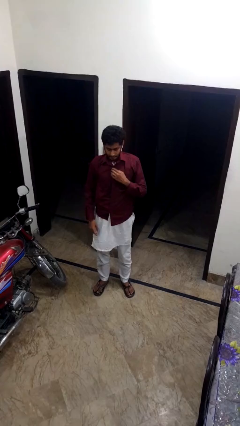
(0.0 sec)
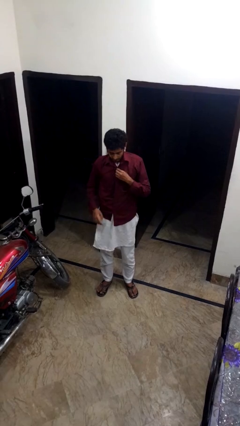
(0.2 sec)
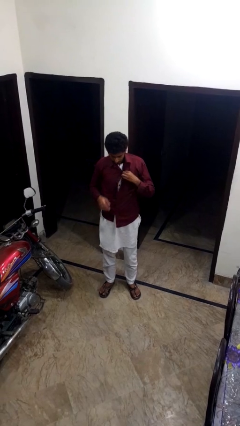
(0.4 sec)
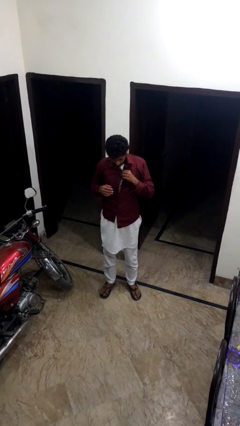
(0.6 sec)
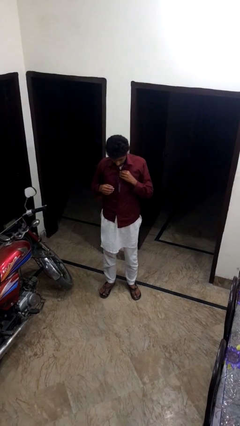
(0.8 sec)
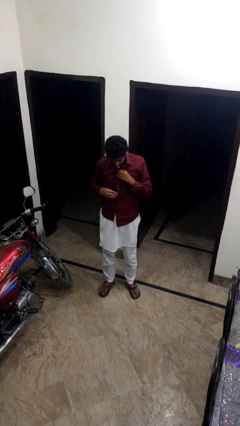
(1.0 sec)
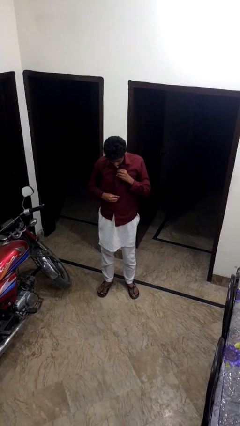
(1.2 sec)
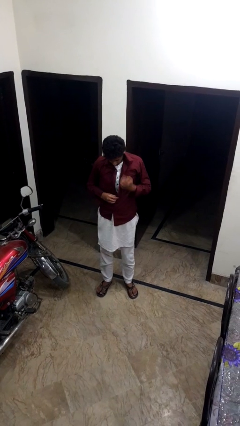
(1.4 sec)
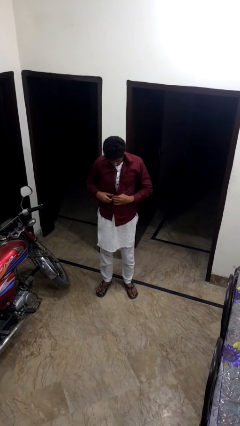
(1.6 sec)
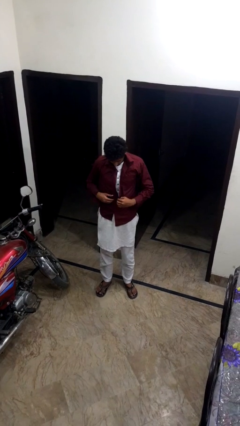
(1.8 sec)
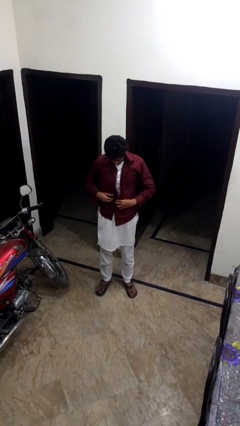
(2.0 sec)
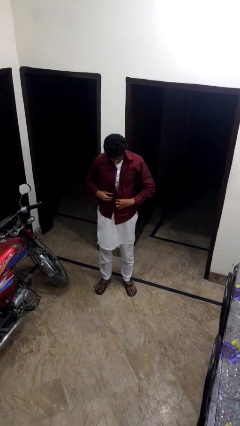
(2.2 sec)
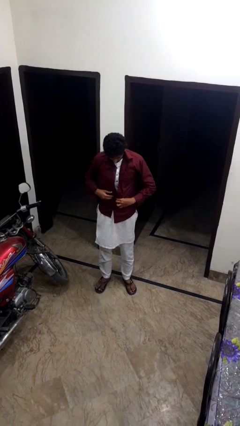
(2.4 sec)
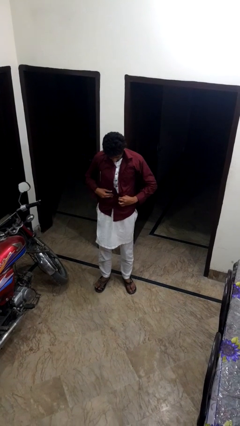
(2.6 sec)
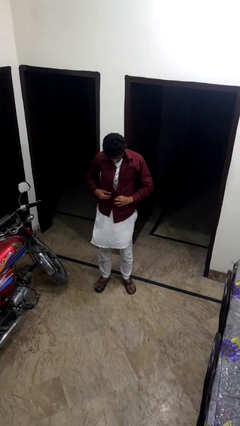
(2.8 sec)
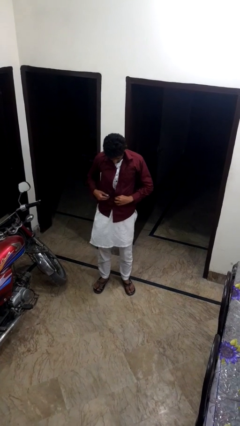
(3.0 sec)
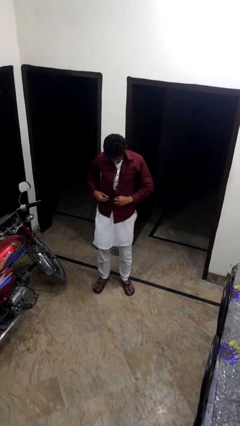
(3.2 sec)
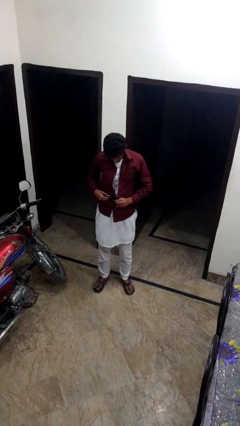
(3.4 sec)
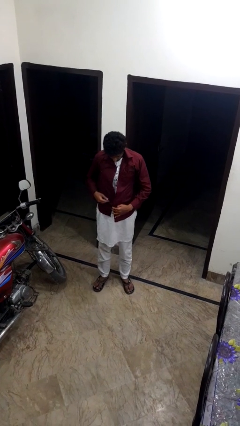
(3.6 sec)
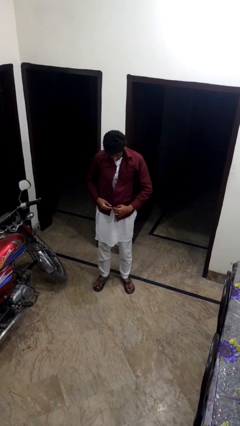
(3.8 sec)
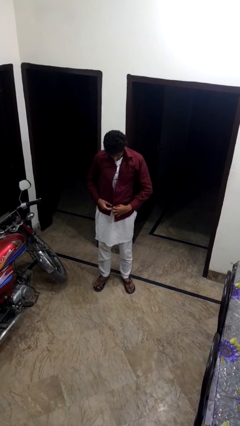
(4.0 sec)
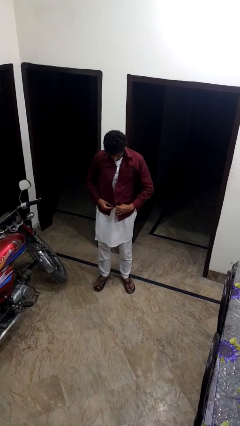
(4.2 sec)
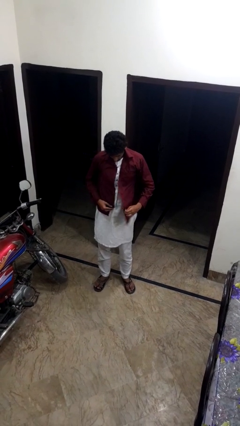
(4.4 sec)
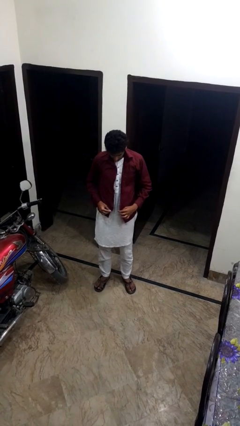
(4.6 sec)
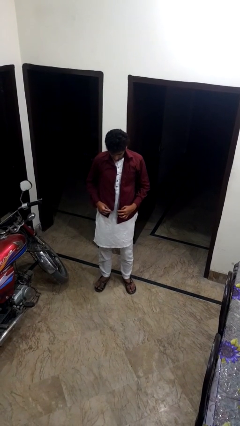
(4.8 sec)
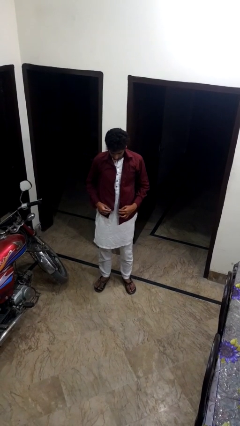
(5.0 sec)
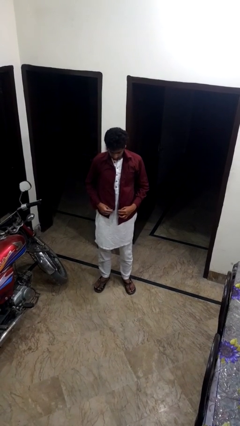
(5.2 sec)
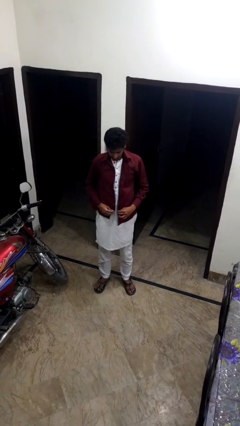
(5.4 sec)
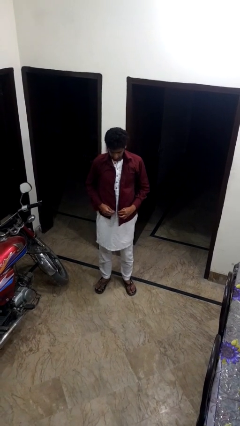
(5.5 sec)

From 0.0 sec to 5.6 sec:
person unbuttons shirt

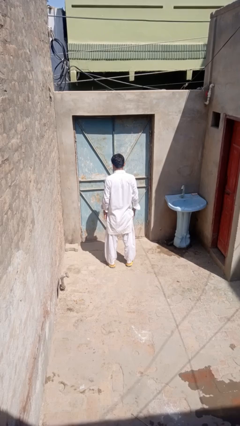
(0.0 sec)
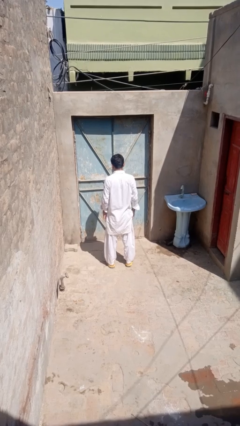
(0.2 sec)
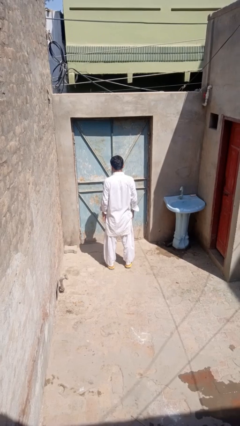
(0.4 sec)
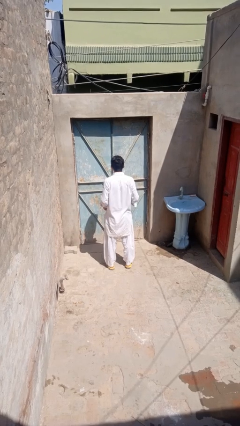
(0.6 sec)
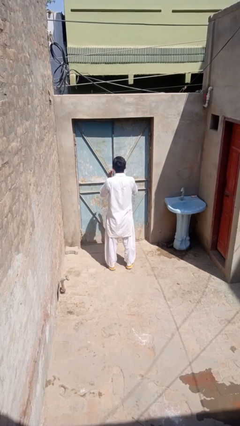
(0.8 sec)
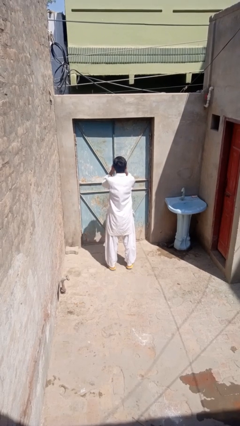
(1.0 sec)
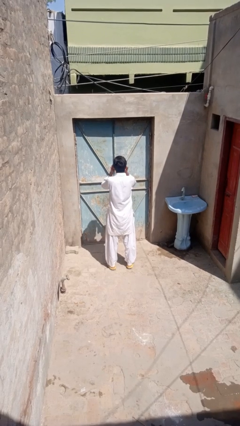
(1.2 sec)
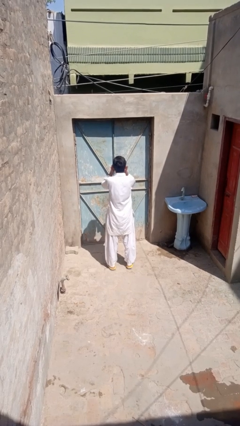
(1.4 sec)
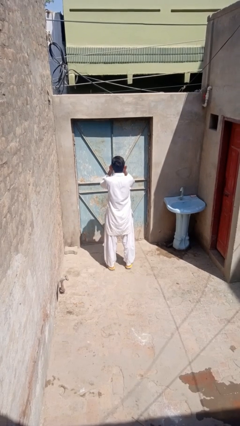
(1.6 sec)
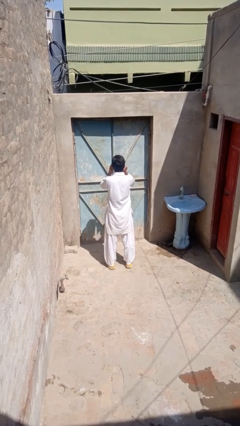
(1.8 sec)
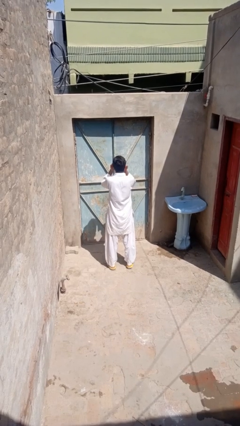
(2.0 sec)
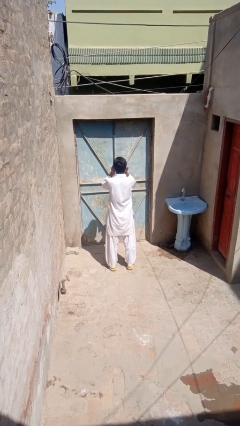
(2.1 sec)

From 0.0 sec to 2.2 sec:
person rubs eyes

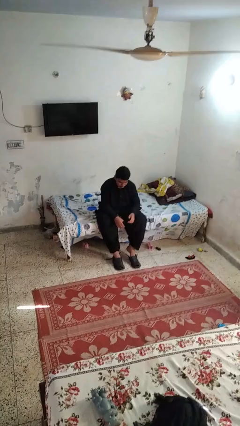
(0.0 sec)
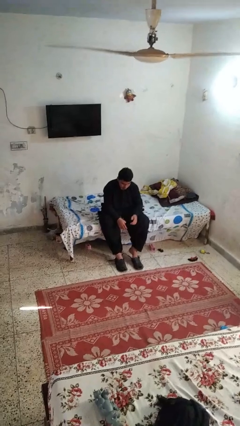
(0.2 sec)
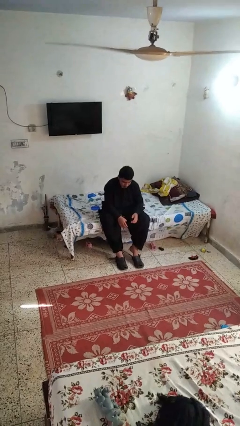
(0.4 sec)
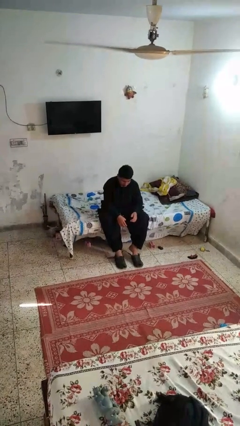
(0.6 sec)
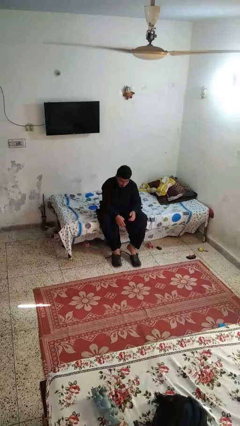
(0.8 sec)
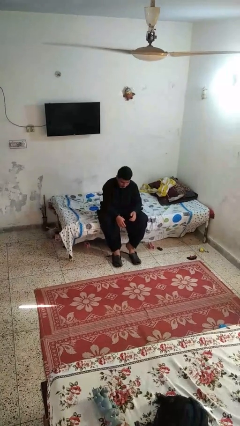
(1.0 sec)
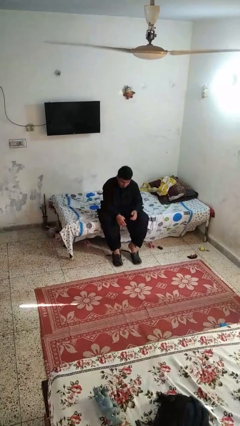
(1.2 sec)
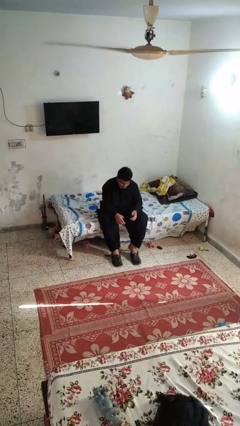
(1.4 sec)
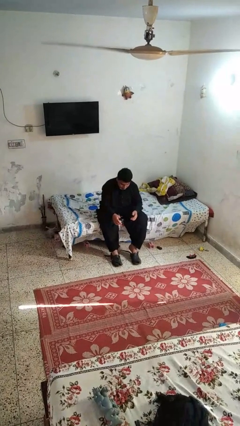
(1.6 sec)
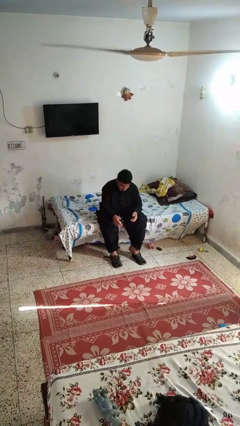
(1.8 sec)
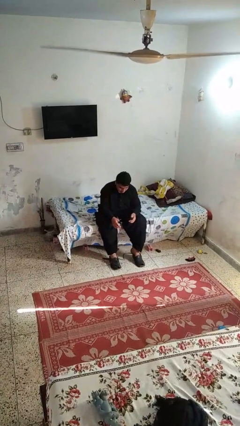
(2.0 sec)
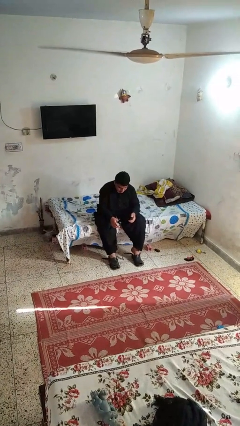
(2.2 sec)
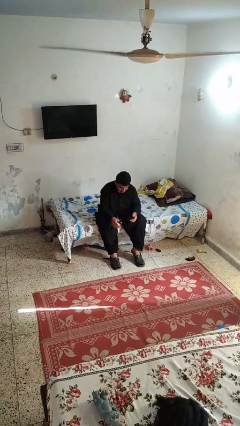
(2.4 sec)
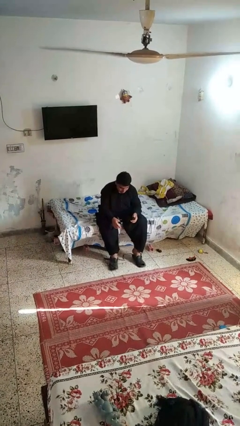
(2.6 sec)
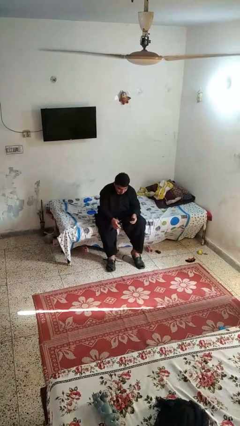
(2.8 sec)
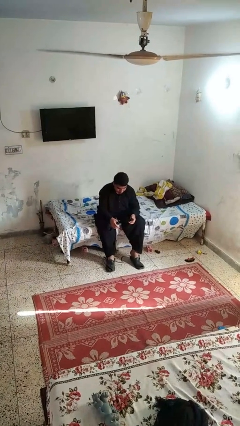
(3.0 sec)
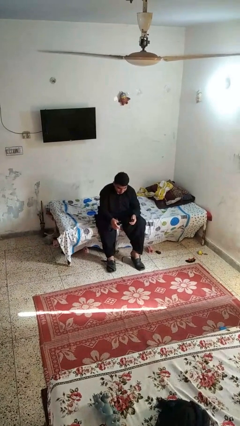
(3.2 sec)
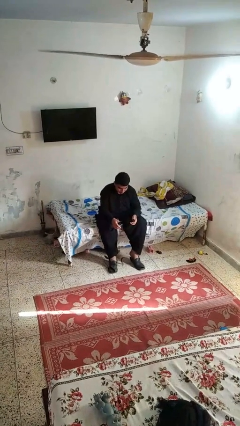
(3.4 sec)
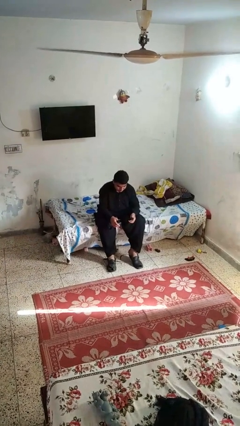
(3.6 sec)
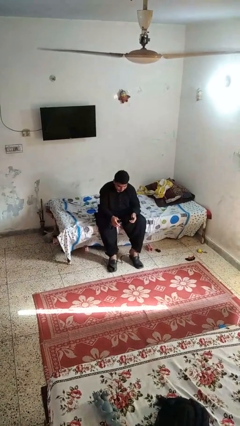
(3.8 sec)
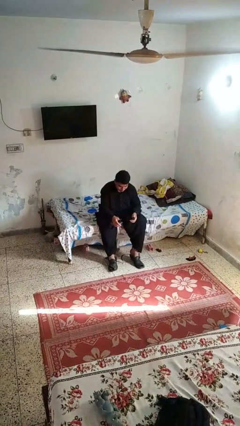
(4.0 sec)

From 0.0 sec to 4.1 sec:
person puts on shoes

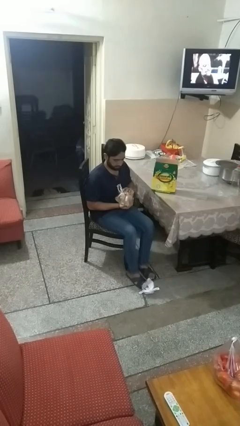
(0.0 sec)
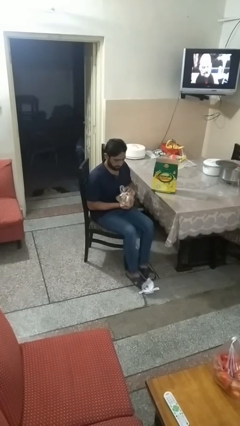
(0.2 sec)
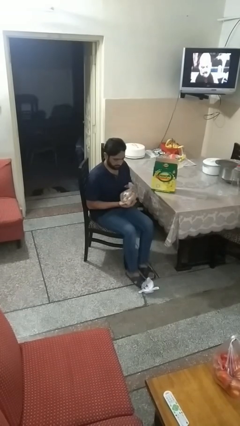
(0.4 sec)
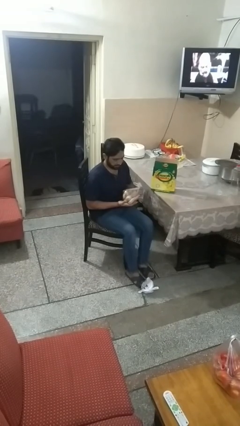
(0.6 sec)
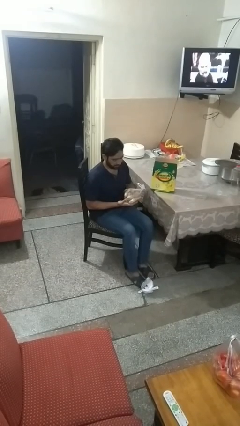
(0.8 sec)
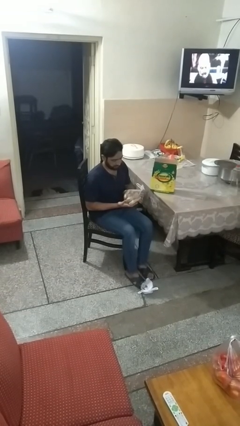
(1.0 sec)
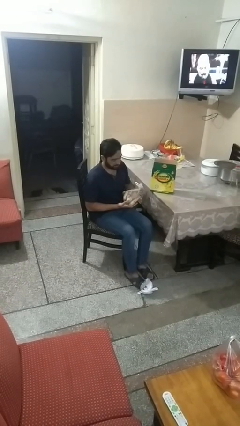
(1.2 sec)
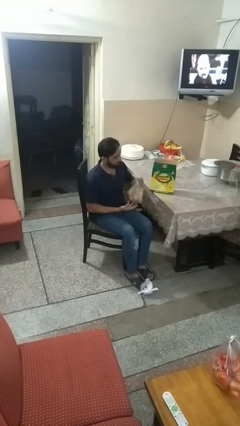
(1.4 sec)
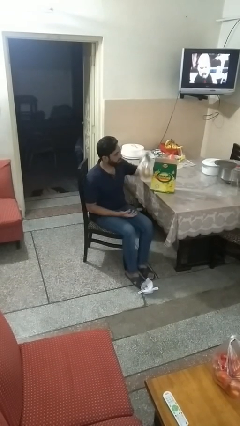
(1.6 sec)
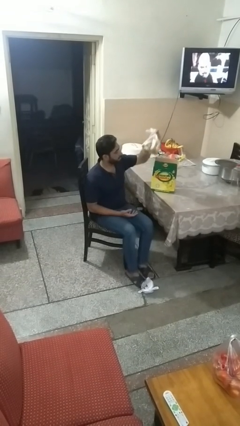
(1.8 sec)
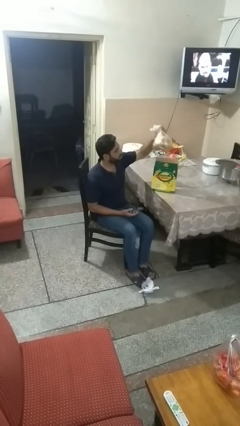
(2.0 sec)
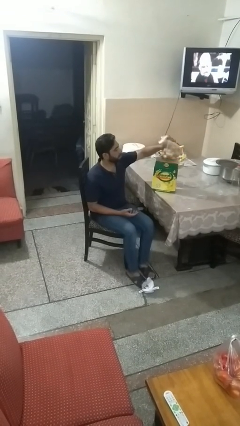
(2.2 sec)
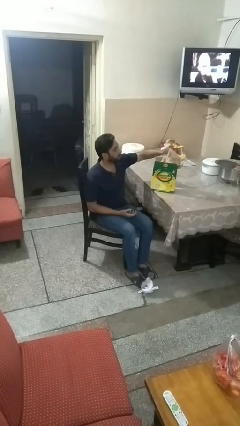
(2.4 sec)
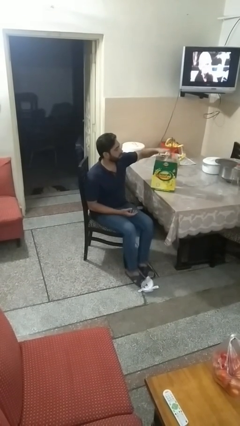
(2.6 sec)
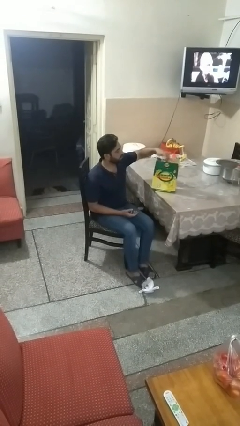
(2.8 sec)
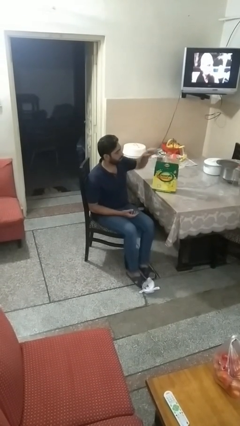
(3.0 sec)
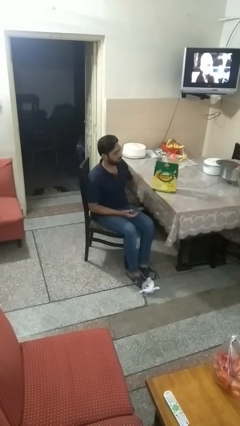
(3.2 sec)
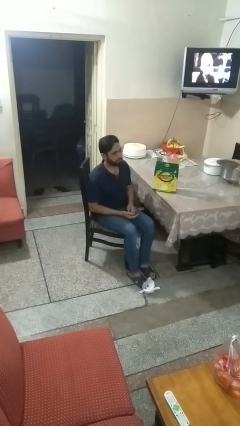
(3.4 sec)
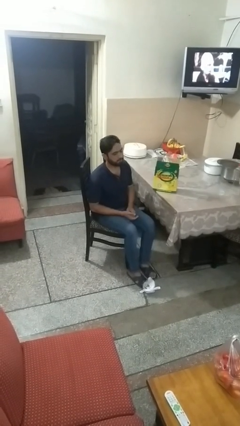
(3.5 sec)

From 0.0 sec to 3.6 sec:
person puts object into box

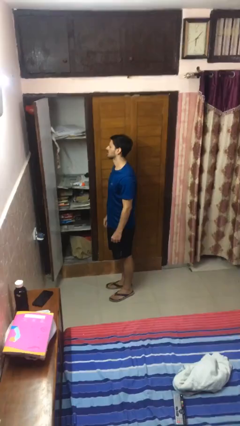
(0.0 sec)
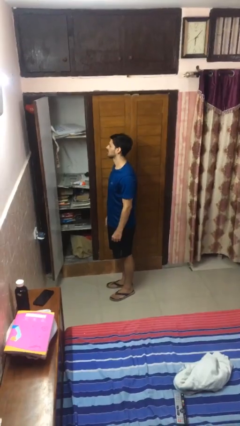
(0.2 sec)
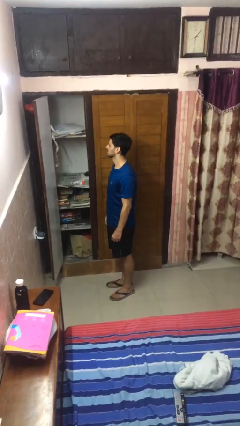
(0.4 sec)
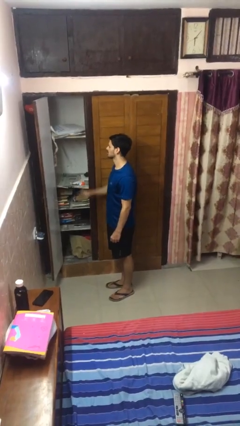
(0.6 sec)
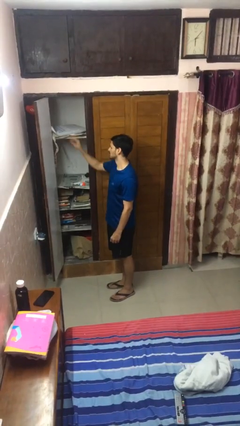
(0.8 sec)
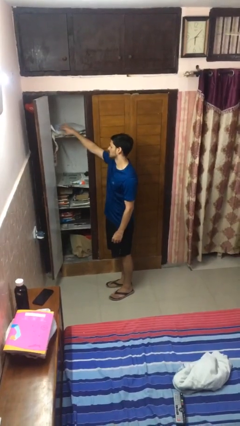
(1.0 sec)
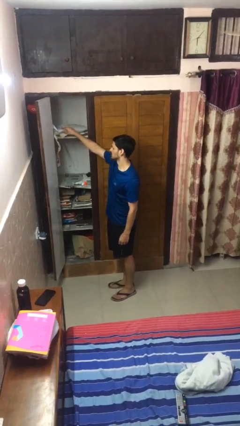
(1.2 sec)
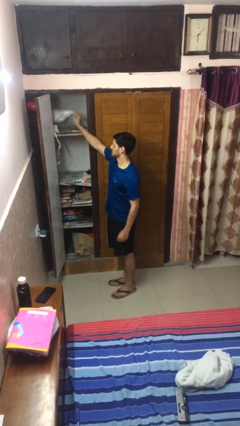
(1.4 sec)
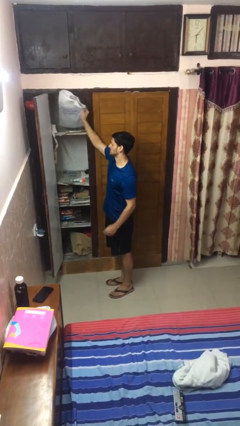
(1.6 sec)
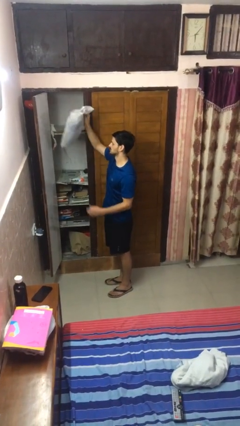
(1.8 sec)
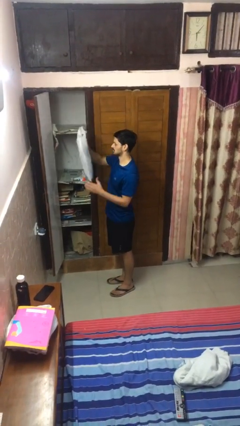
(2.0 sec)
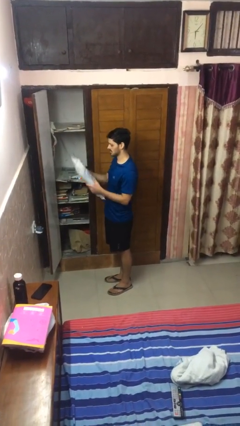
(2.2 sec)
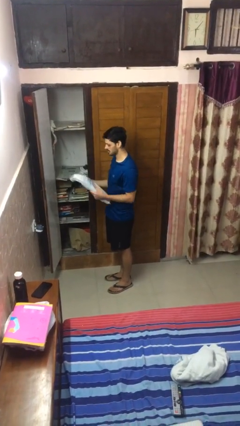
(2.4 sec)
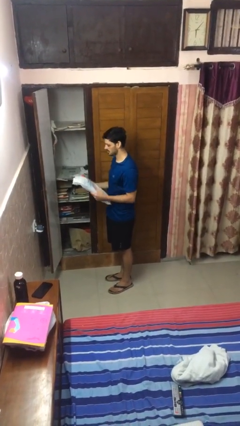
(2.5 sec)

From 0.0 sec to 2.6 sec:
person picks up object from shelf
